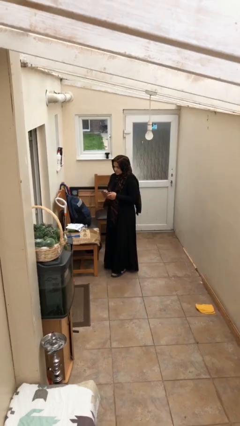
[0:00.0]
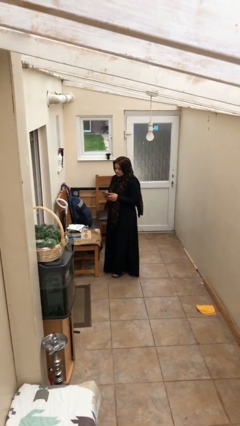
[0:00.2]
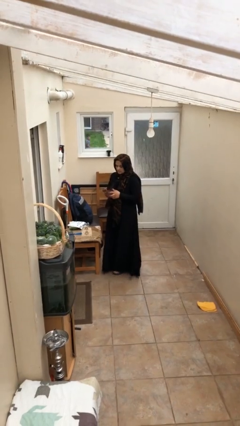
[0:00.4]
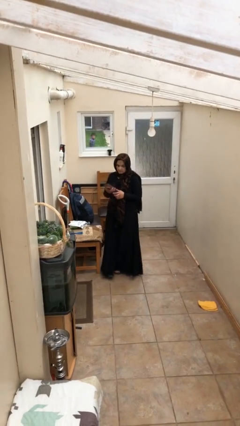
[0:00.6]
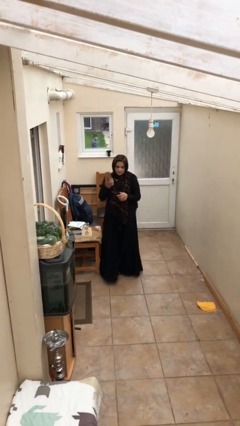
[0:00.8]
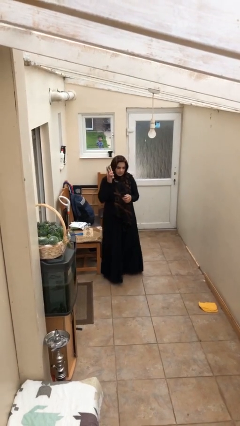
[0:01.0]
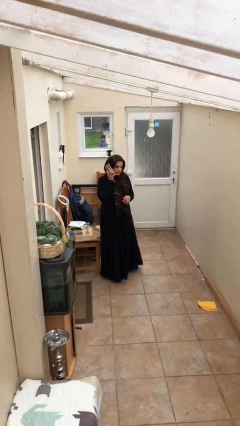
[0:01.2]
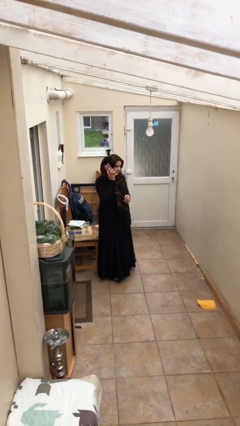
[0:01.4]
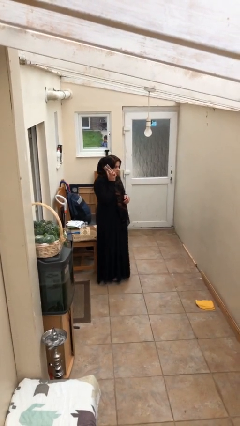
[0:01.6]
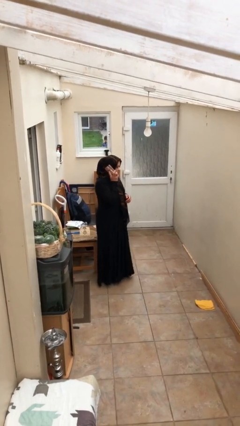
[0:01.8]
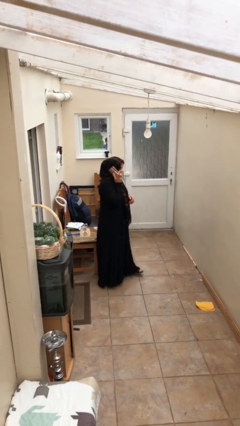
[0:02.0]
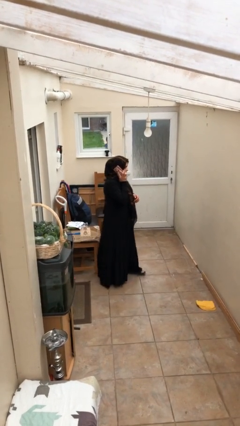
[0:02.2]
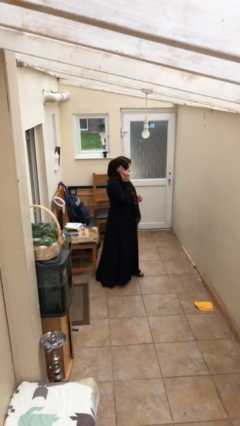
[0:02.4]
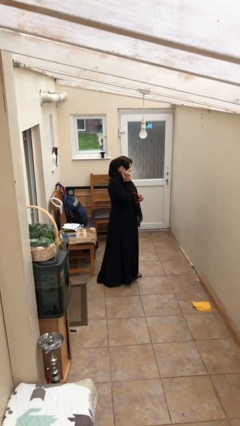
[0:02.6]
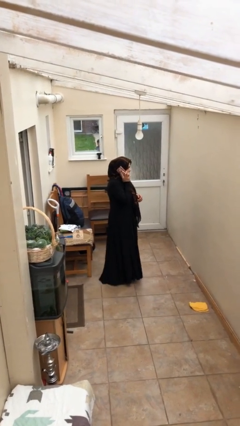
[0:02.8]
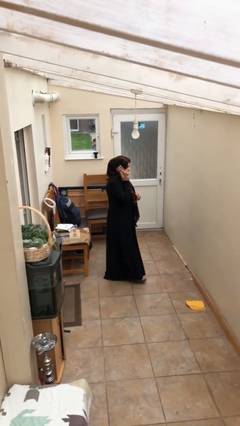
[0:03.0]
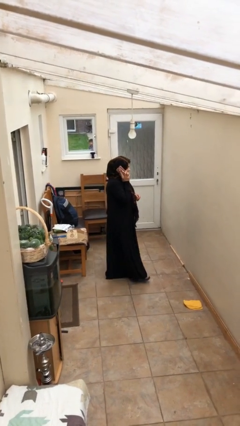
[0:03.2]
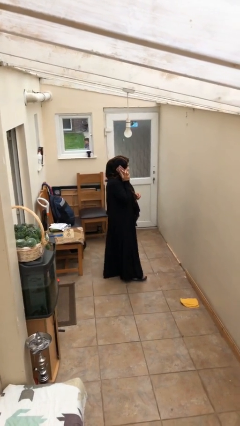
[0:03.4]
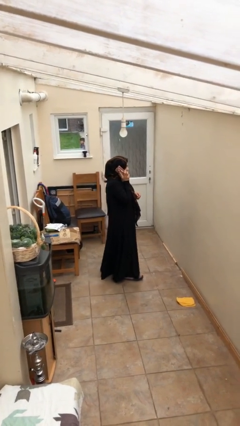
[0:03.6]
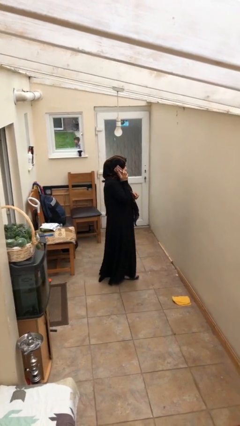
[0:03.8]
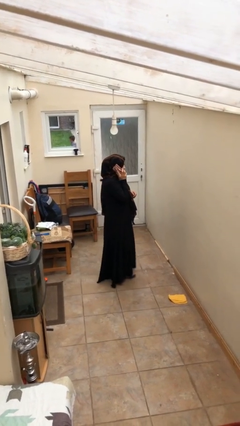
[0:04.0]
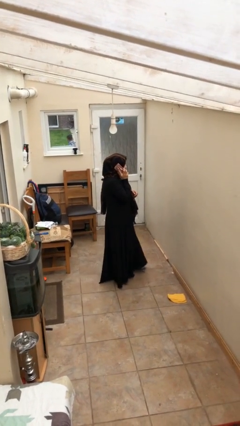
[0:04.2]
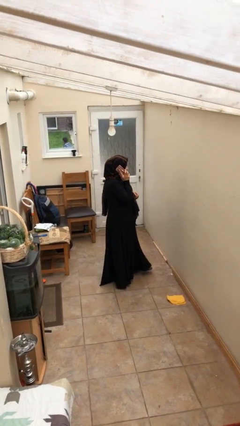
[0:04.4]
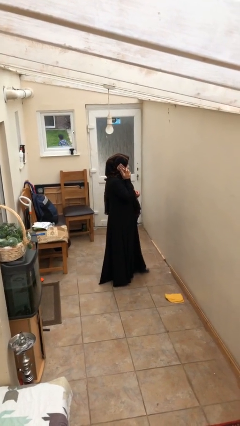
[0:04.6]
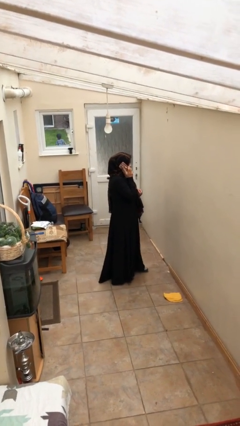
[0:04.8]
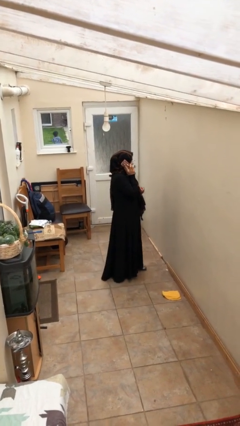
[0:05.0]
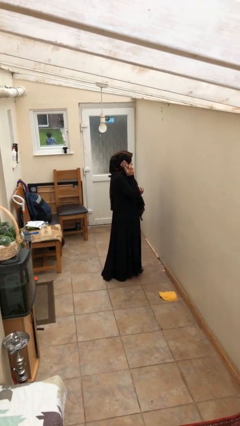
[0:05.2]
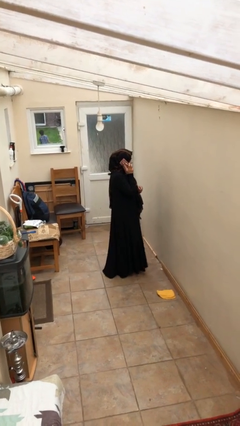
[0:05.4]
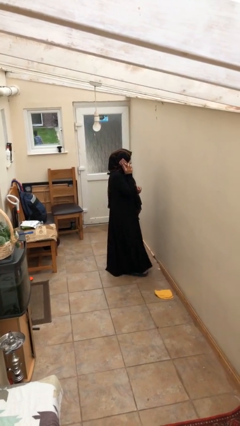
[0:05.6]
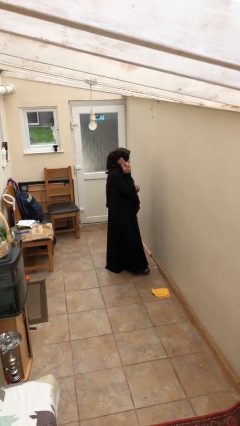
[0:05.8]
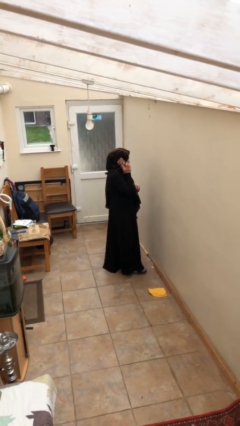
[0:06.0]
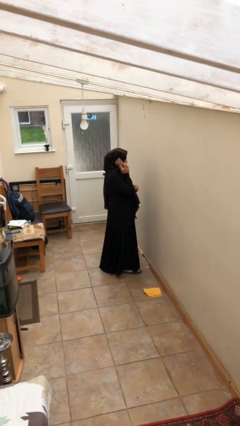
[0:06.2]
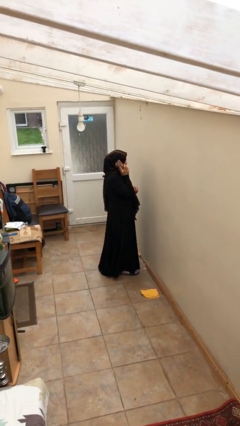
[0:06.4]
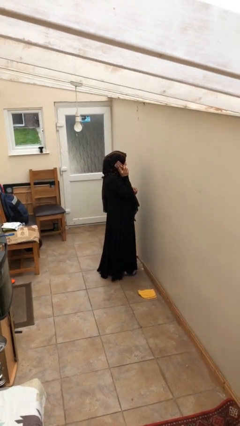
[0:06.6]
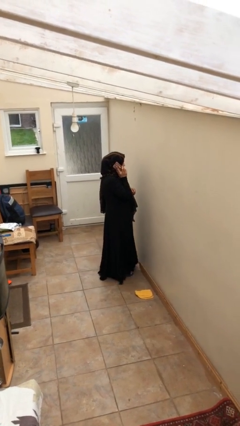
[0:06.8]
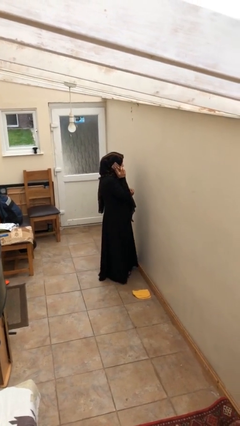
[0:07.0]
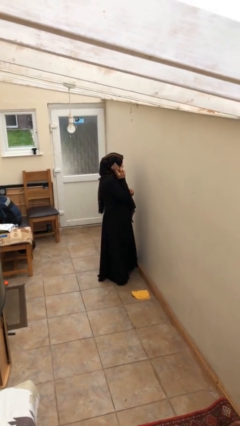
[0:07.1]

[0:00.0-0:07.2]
person talks on phone

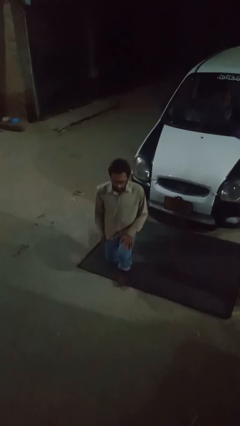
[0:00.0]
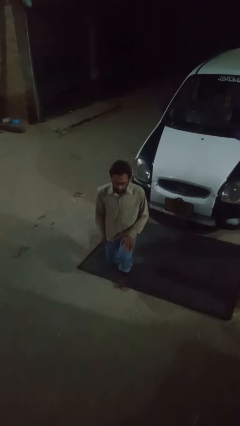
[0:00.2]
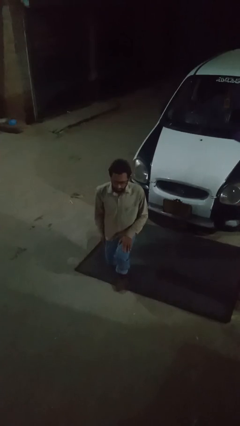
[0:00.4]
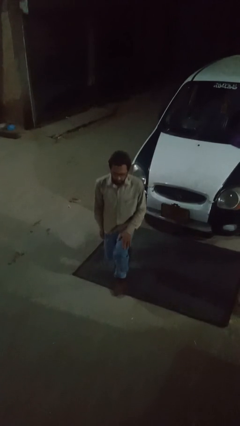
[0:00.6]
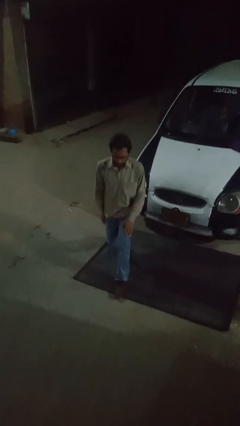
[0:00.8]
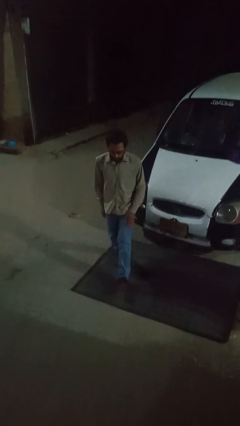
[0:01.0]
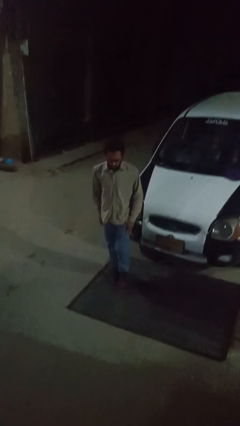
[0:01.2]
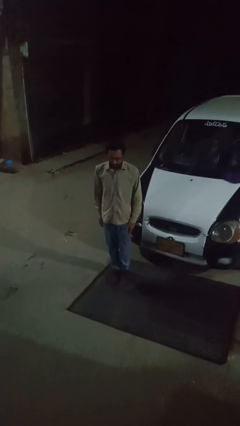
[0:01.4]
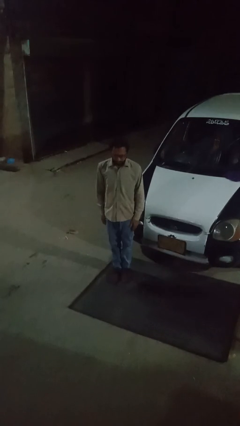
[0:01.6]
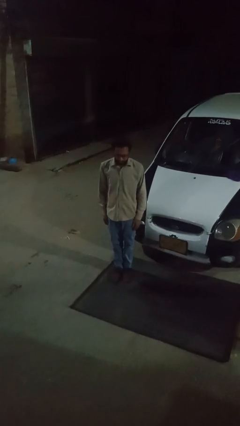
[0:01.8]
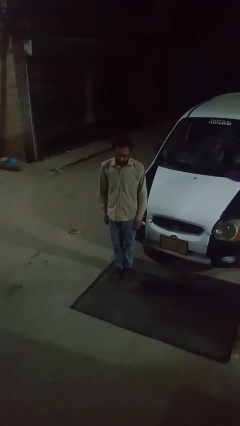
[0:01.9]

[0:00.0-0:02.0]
person stands up

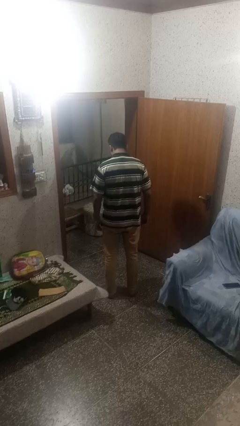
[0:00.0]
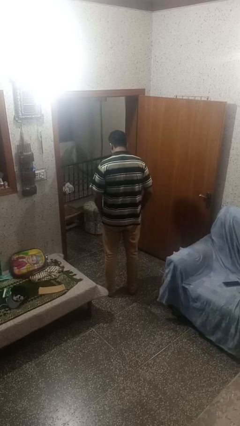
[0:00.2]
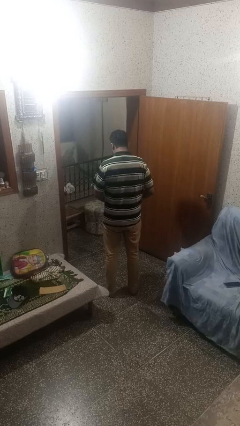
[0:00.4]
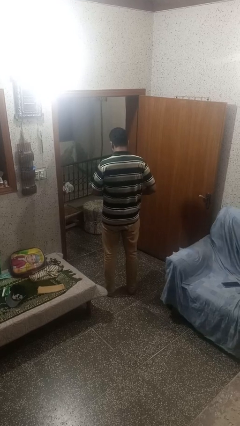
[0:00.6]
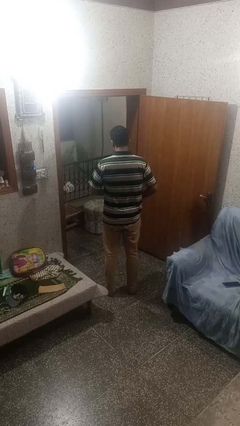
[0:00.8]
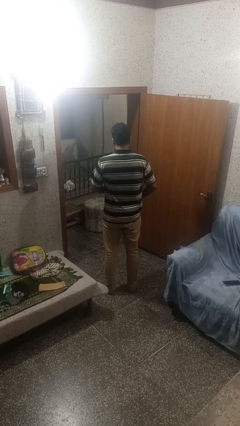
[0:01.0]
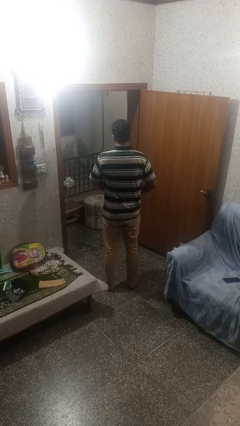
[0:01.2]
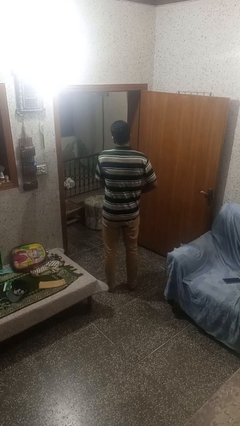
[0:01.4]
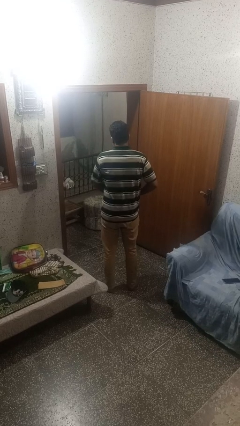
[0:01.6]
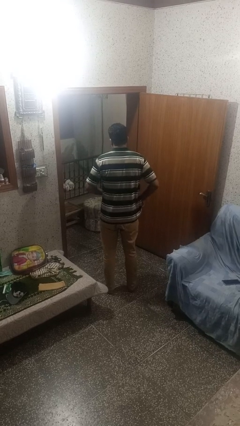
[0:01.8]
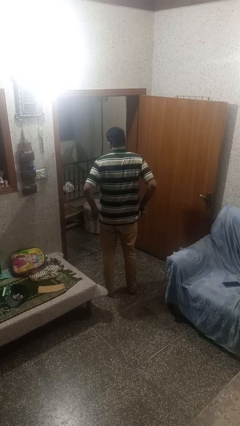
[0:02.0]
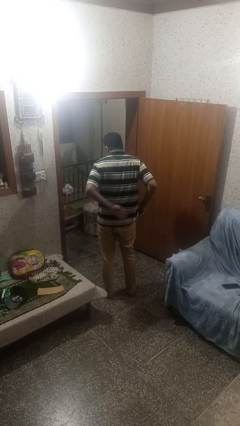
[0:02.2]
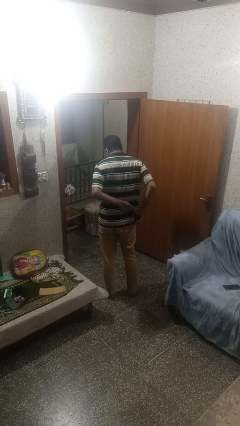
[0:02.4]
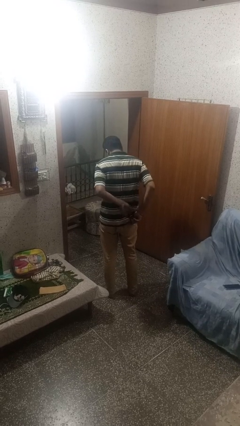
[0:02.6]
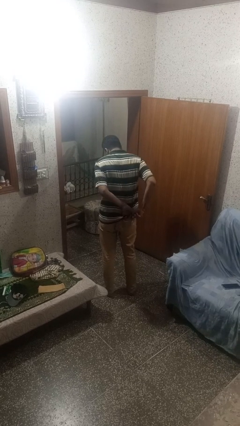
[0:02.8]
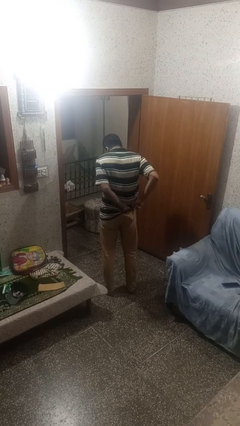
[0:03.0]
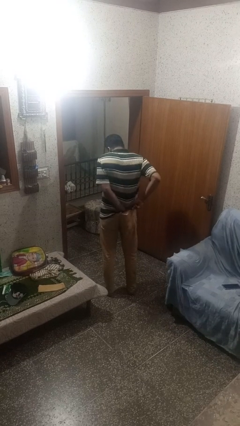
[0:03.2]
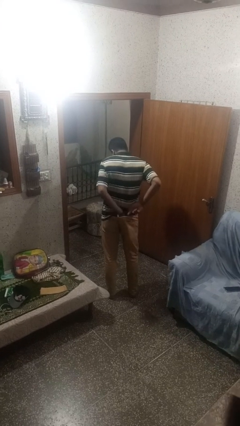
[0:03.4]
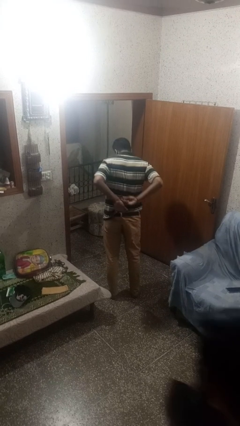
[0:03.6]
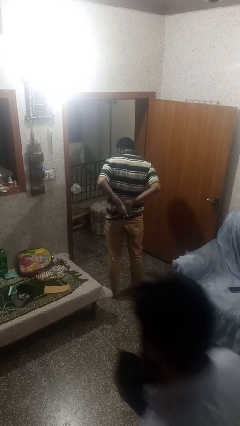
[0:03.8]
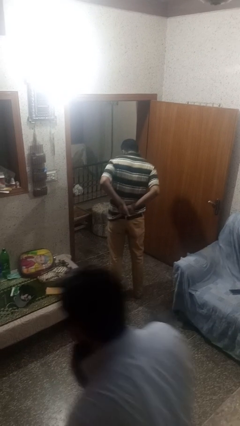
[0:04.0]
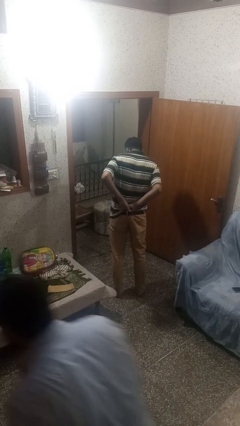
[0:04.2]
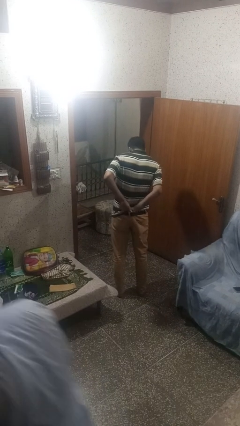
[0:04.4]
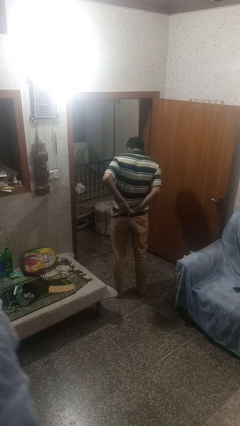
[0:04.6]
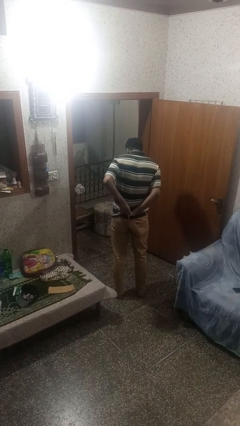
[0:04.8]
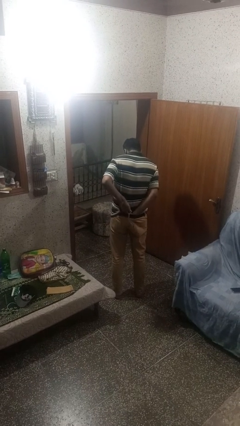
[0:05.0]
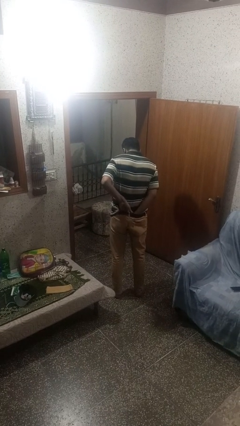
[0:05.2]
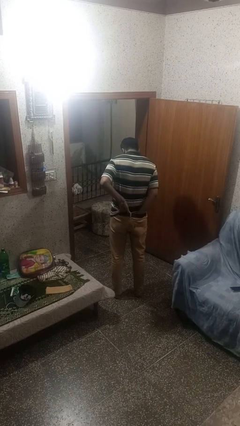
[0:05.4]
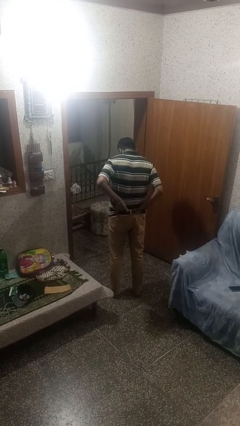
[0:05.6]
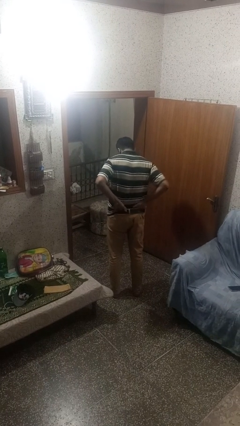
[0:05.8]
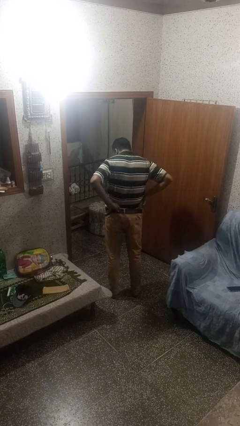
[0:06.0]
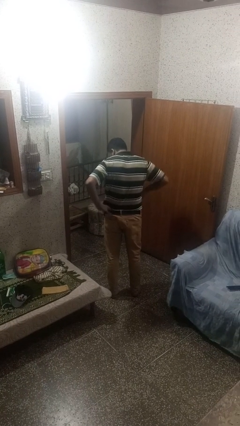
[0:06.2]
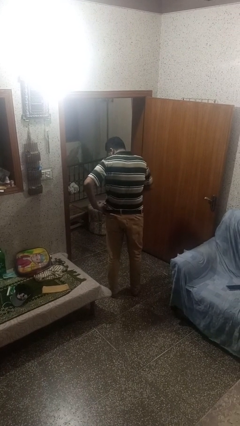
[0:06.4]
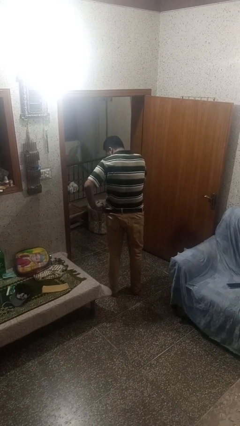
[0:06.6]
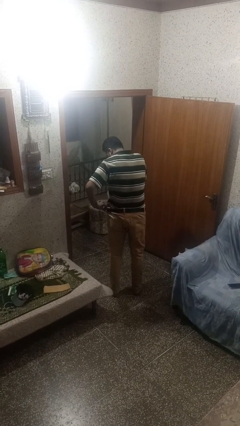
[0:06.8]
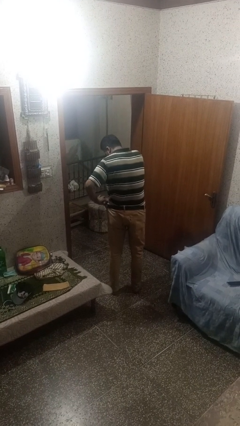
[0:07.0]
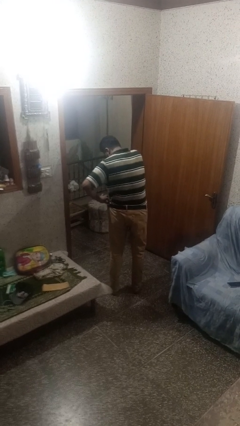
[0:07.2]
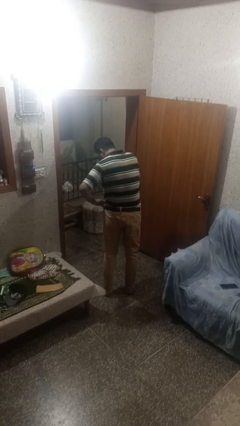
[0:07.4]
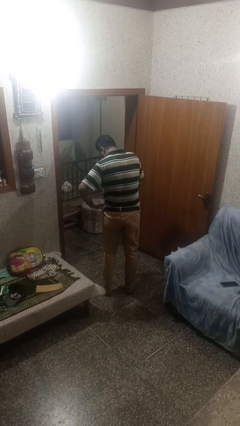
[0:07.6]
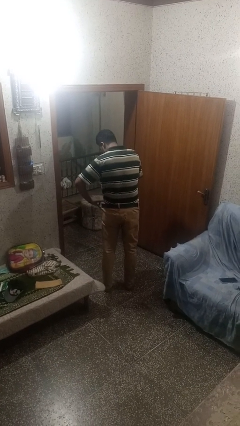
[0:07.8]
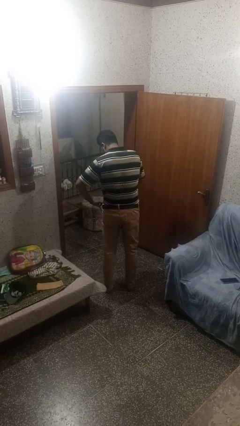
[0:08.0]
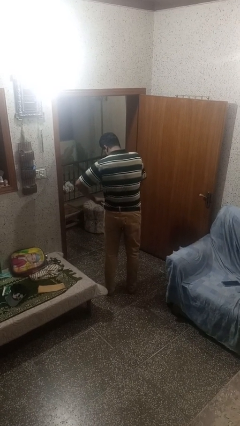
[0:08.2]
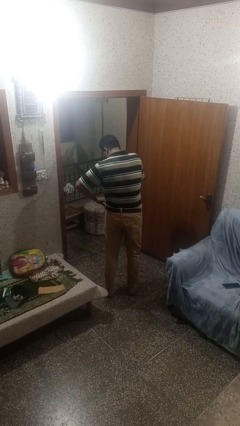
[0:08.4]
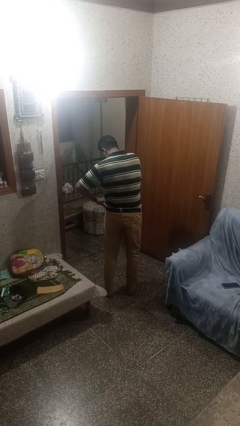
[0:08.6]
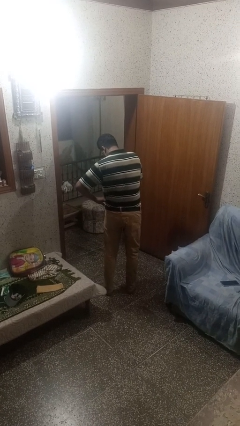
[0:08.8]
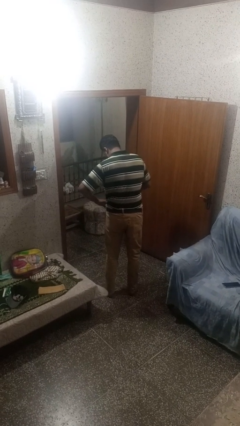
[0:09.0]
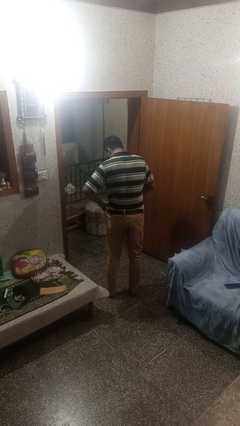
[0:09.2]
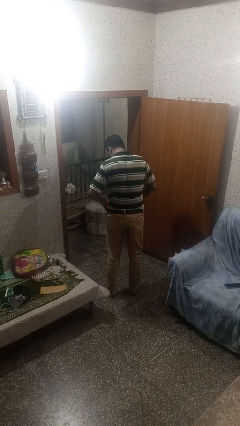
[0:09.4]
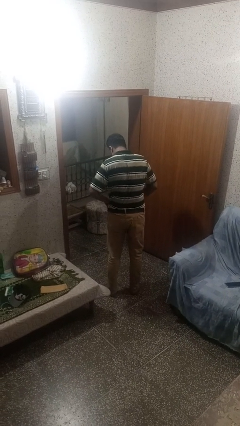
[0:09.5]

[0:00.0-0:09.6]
person tucks in shirt
